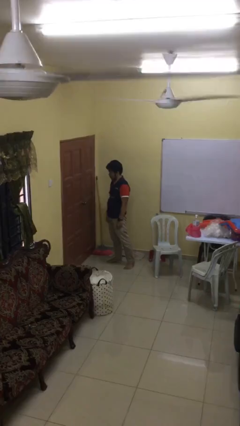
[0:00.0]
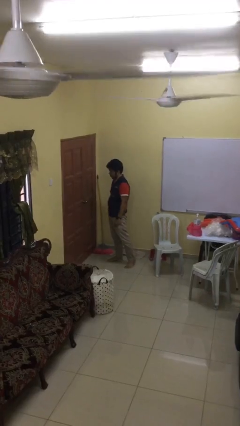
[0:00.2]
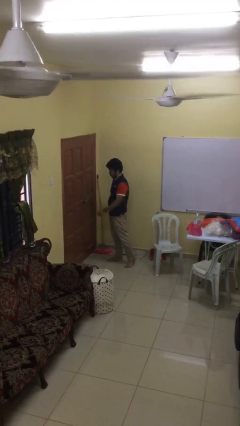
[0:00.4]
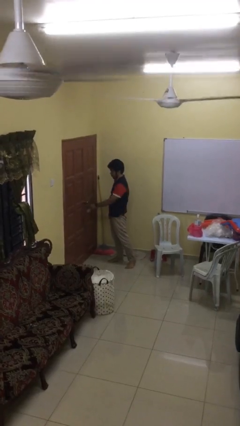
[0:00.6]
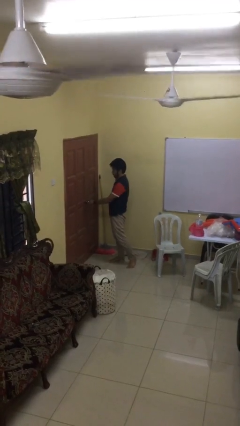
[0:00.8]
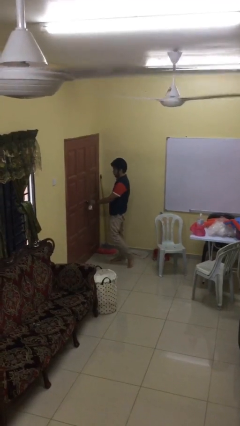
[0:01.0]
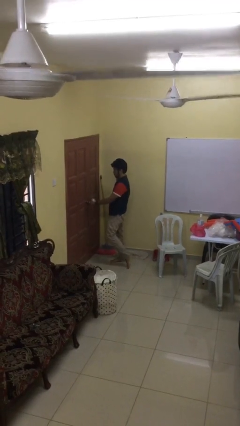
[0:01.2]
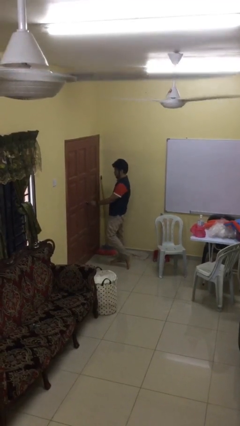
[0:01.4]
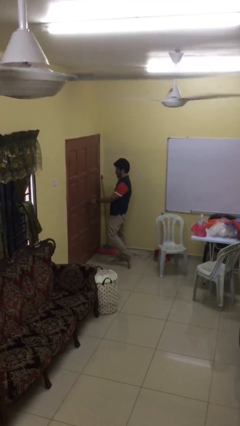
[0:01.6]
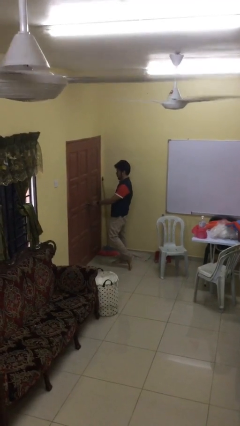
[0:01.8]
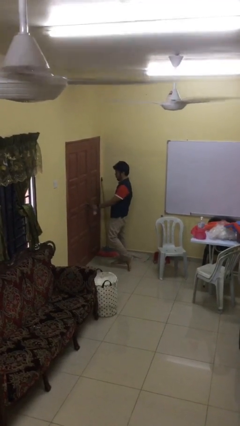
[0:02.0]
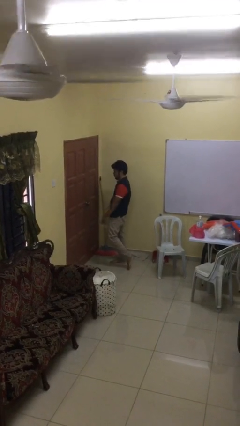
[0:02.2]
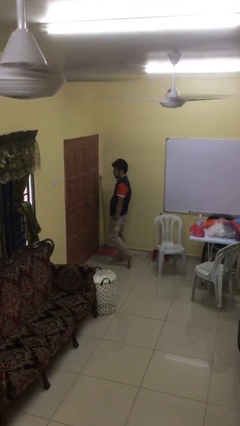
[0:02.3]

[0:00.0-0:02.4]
person locks door with keys

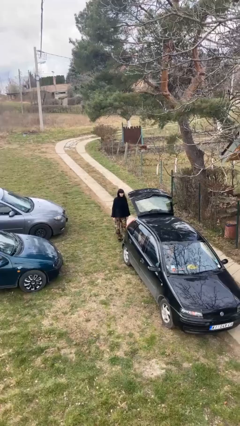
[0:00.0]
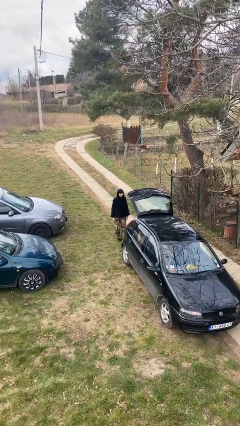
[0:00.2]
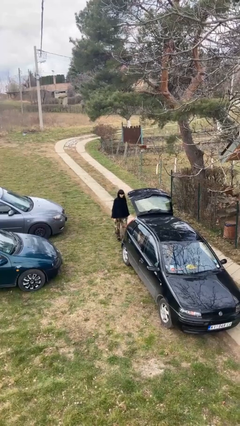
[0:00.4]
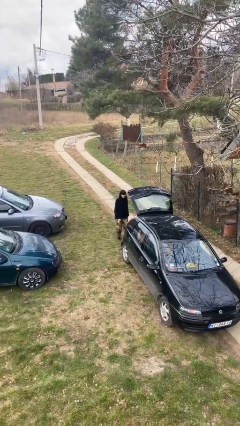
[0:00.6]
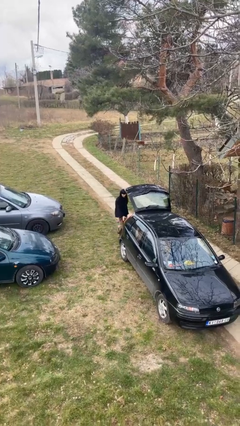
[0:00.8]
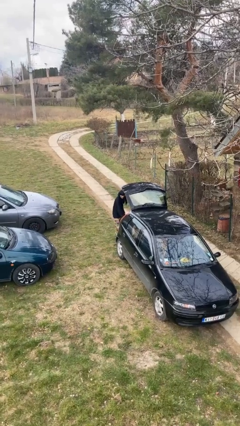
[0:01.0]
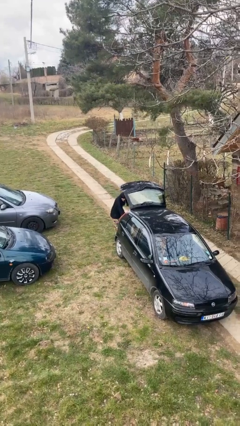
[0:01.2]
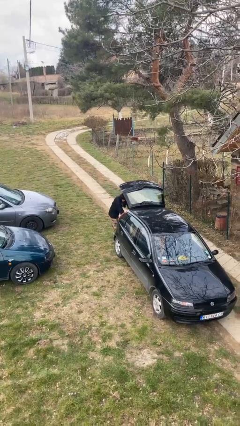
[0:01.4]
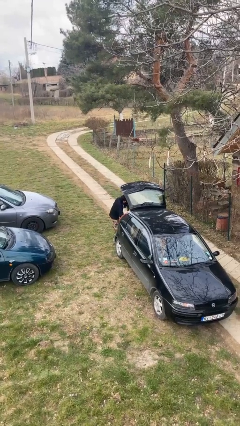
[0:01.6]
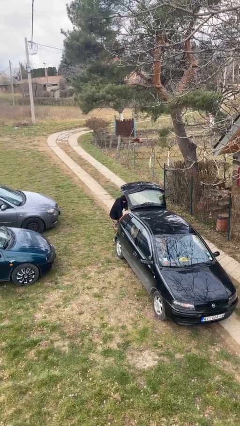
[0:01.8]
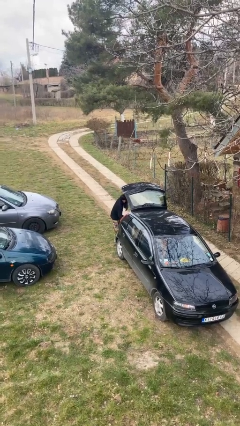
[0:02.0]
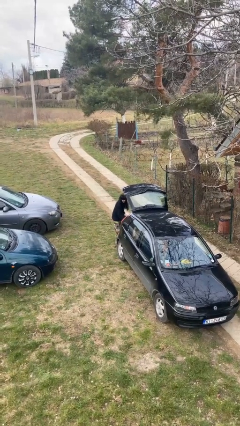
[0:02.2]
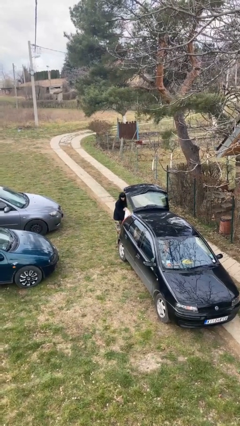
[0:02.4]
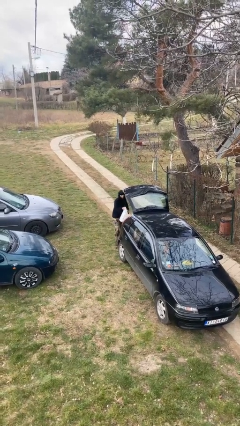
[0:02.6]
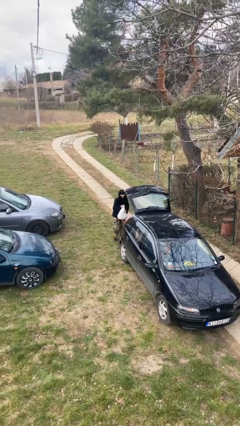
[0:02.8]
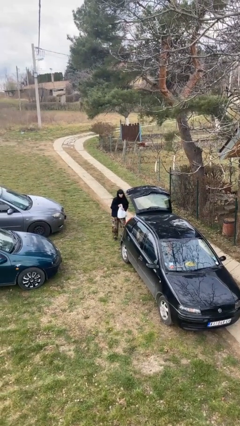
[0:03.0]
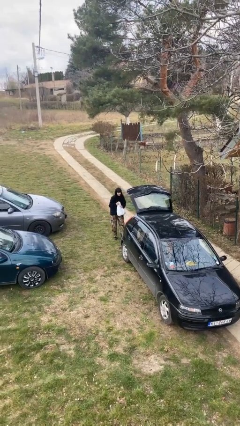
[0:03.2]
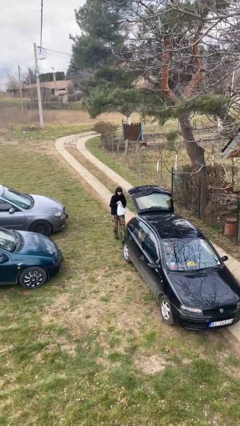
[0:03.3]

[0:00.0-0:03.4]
person unloads car

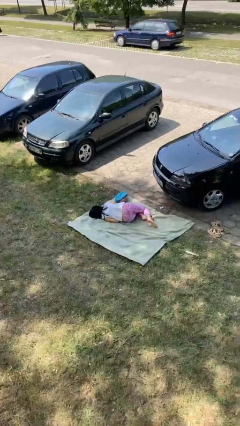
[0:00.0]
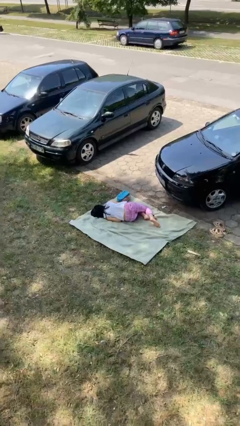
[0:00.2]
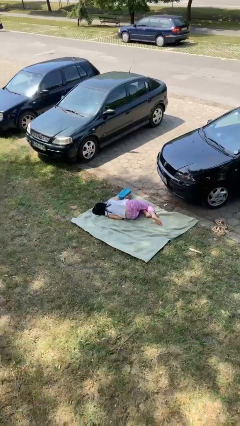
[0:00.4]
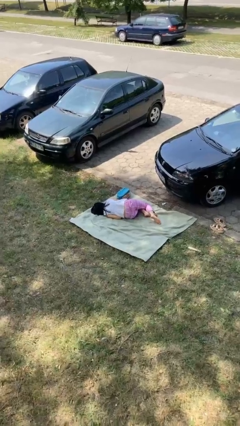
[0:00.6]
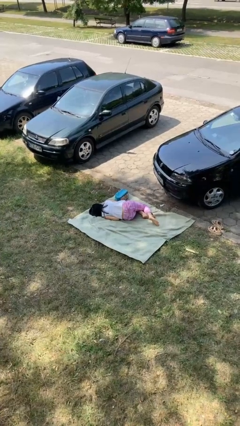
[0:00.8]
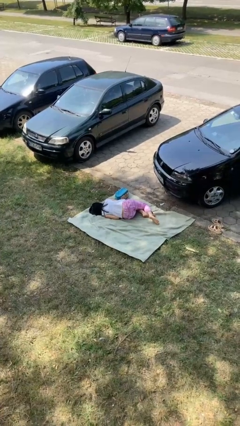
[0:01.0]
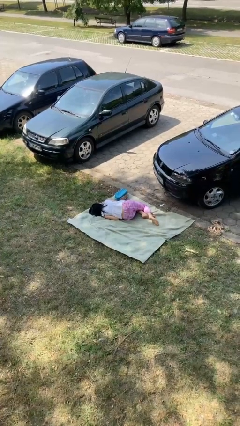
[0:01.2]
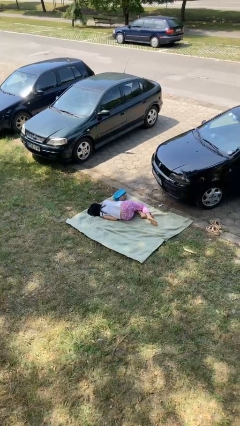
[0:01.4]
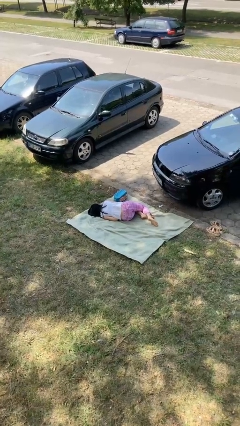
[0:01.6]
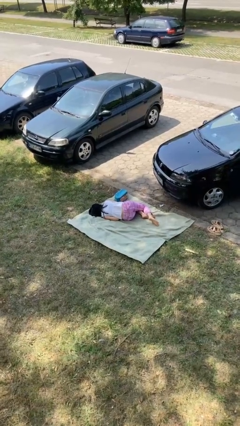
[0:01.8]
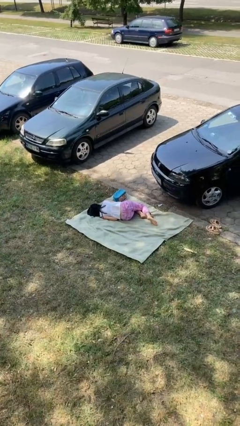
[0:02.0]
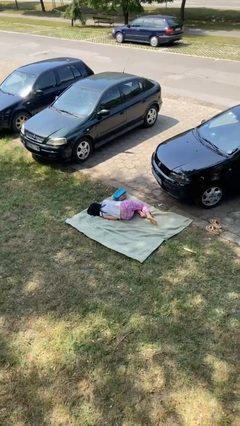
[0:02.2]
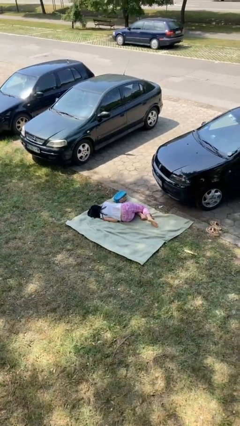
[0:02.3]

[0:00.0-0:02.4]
person lies down on floor

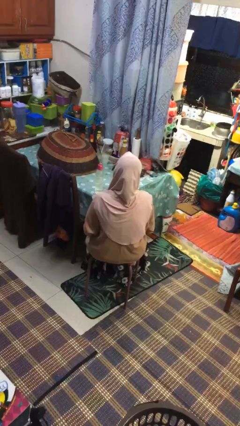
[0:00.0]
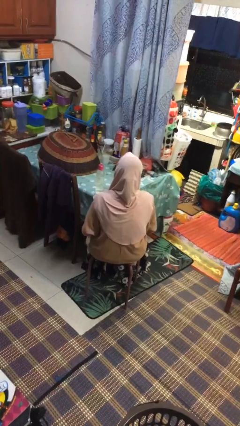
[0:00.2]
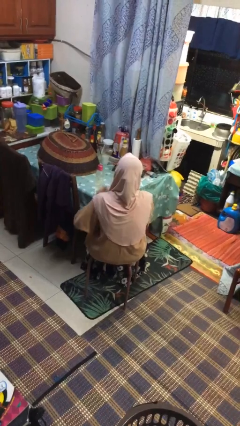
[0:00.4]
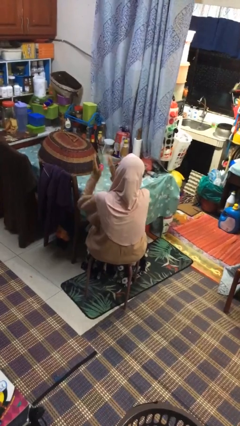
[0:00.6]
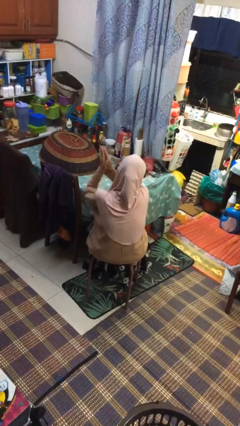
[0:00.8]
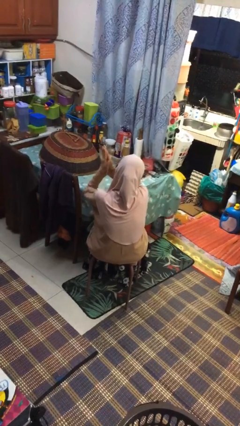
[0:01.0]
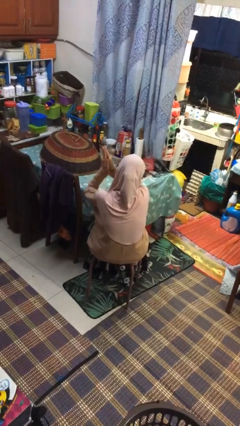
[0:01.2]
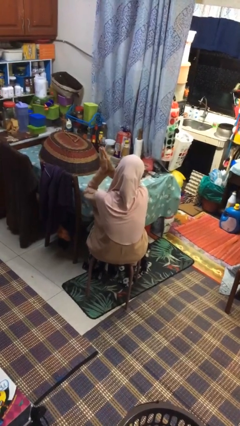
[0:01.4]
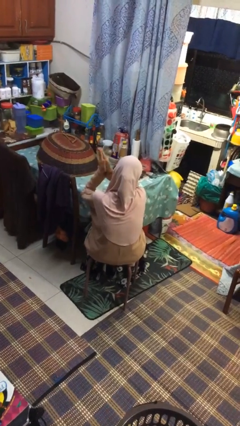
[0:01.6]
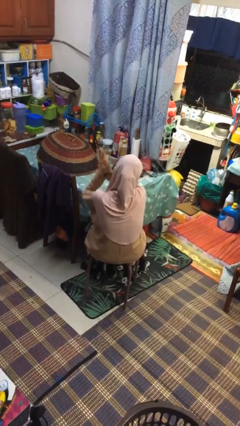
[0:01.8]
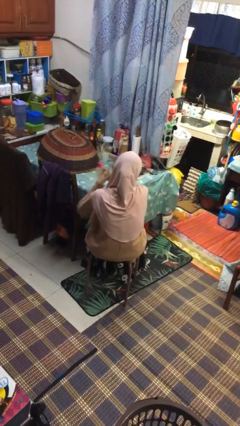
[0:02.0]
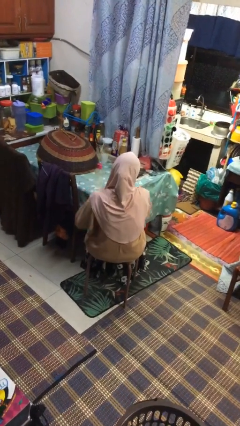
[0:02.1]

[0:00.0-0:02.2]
person claps hands

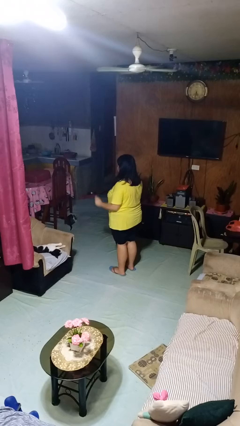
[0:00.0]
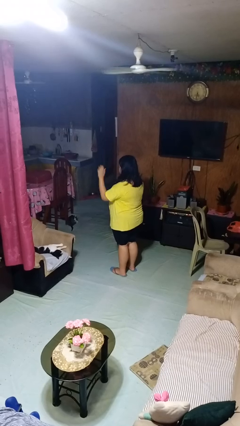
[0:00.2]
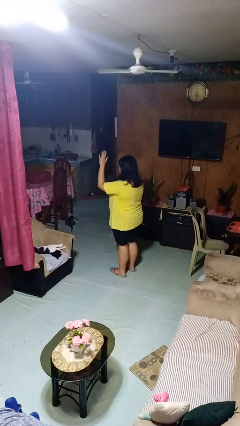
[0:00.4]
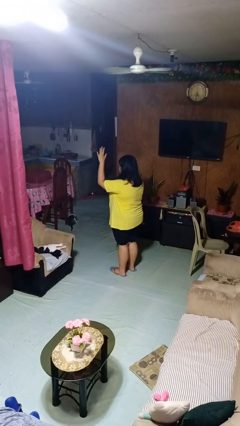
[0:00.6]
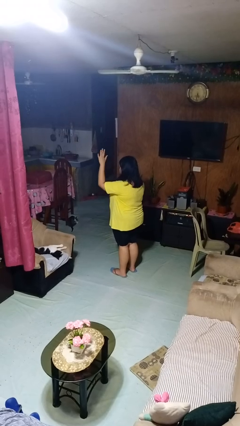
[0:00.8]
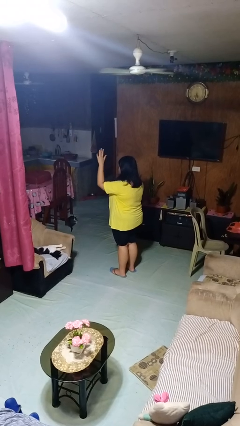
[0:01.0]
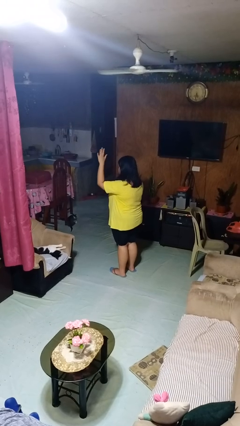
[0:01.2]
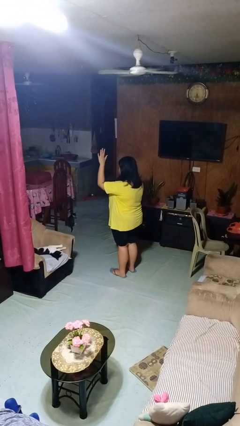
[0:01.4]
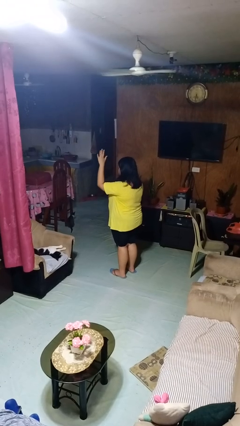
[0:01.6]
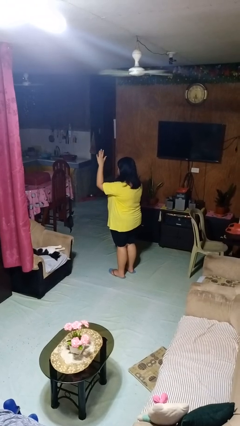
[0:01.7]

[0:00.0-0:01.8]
person gestures raise hand

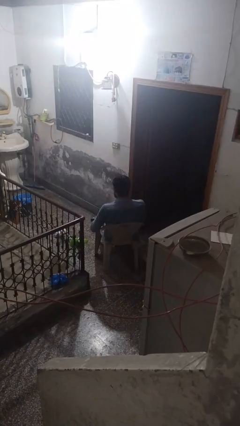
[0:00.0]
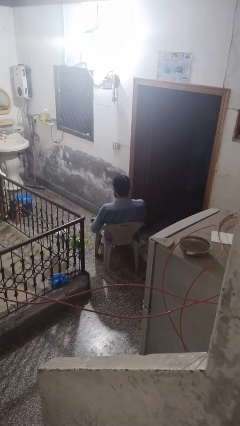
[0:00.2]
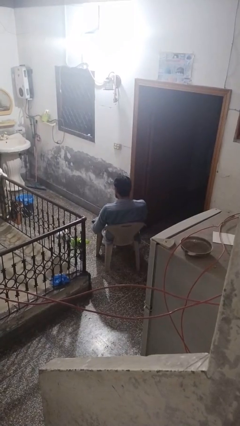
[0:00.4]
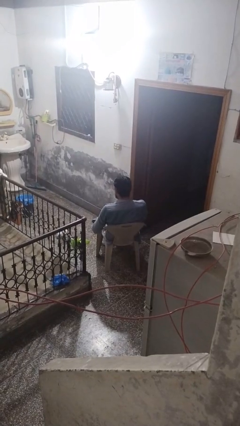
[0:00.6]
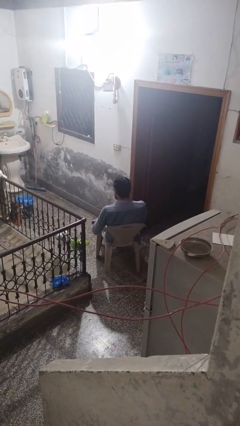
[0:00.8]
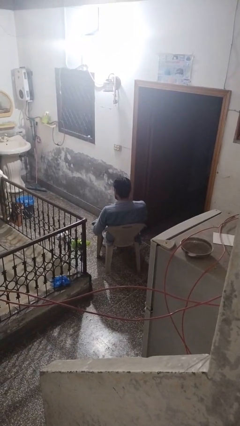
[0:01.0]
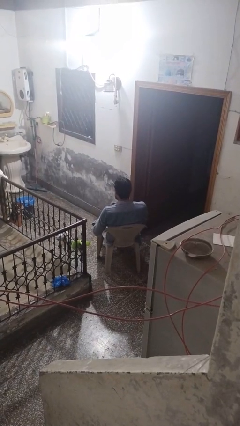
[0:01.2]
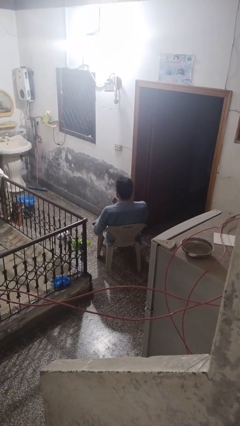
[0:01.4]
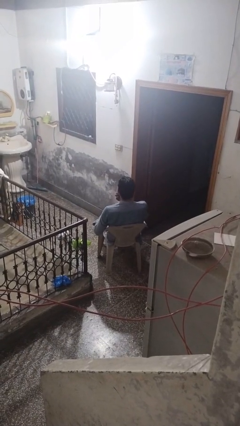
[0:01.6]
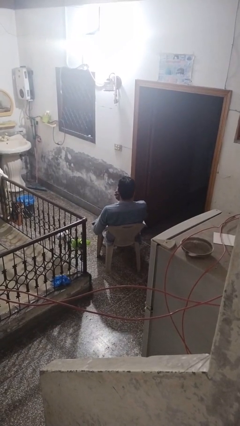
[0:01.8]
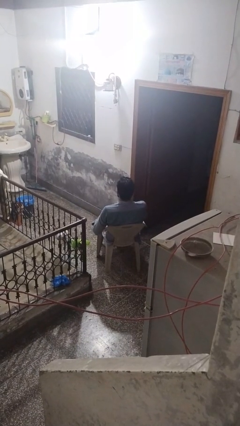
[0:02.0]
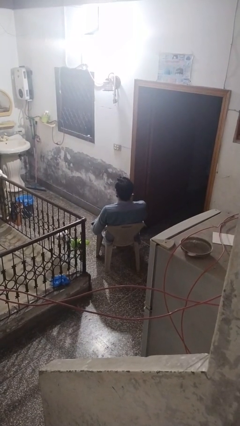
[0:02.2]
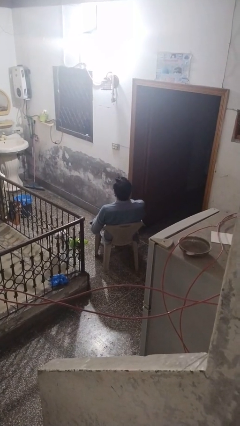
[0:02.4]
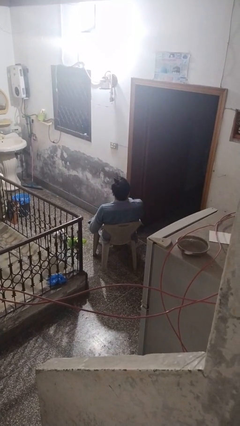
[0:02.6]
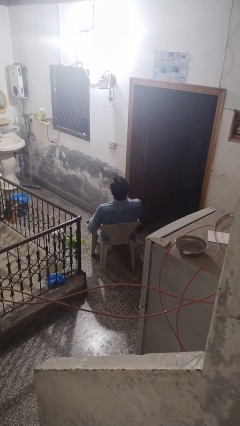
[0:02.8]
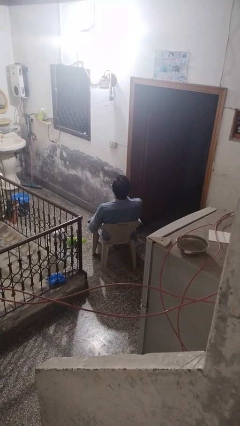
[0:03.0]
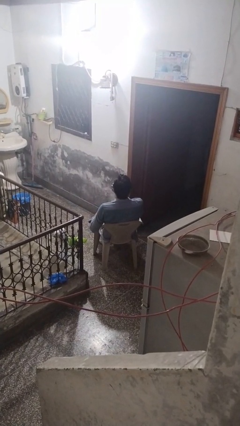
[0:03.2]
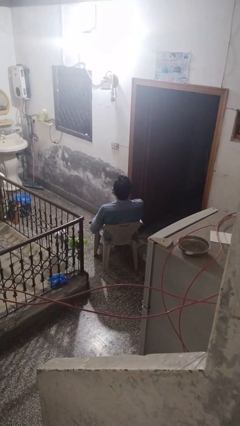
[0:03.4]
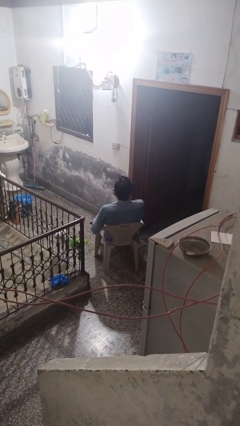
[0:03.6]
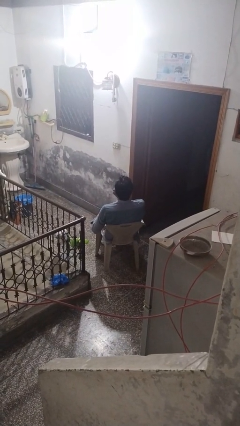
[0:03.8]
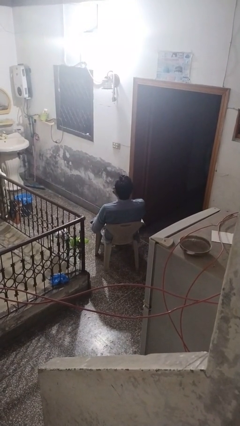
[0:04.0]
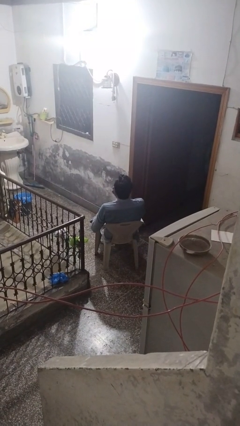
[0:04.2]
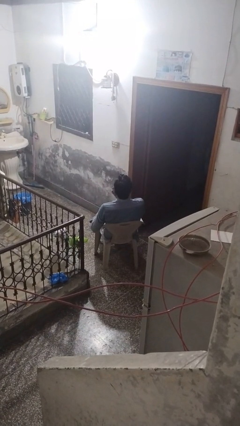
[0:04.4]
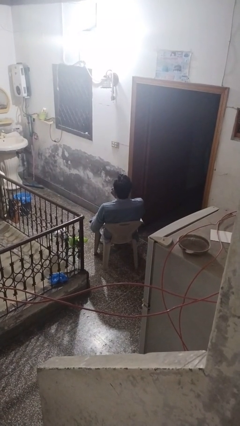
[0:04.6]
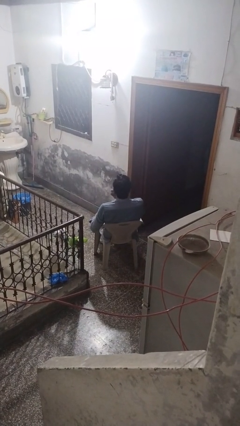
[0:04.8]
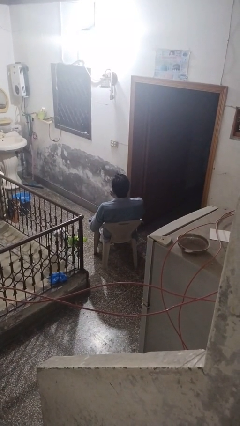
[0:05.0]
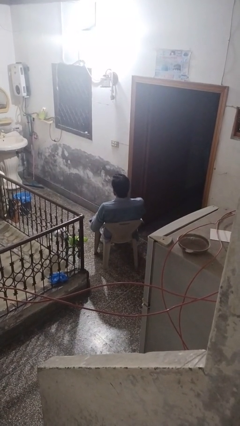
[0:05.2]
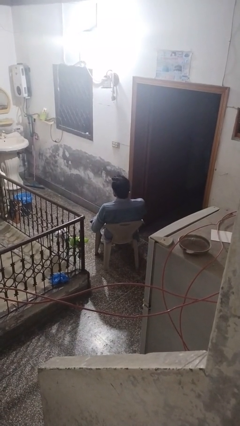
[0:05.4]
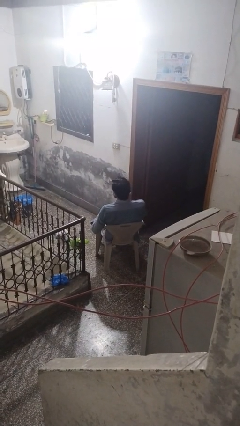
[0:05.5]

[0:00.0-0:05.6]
person applies facial moisturizer
